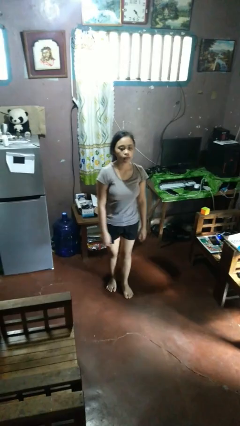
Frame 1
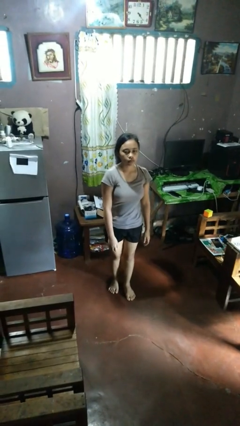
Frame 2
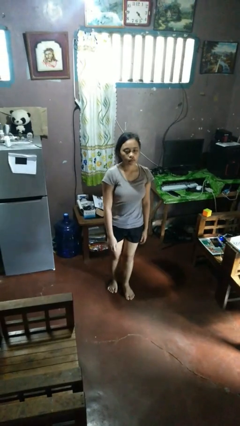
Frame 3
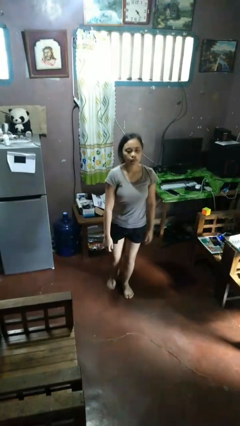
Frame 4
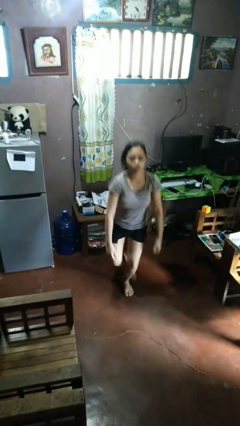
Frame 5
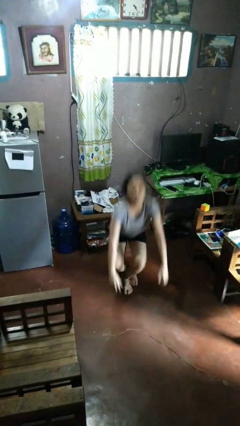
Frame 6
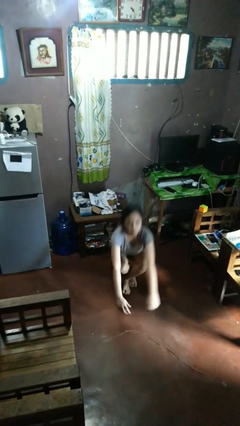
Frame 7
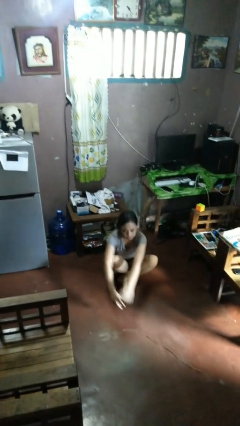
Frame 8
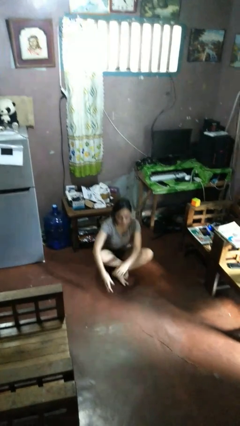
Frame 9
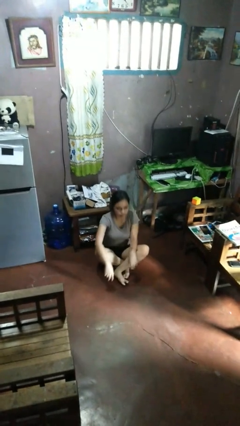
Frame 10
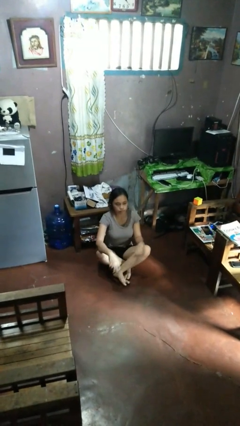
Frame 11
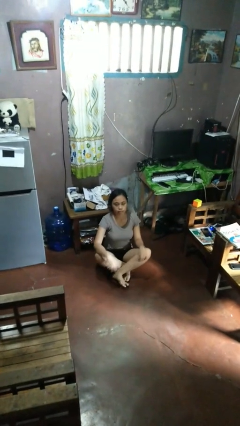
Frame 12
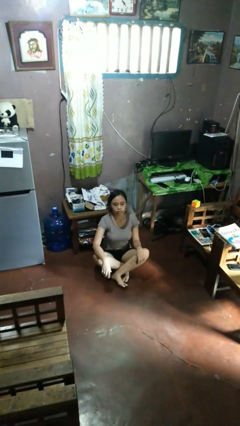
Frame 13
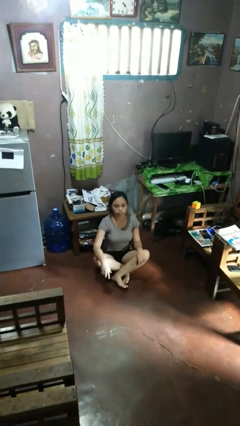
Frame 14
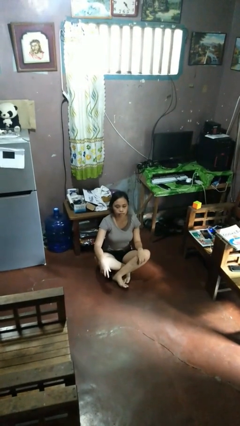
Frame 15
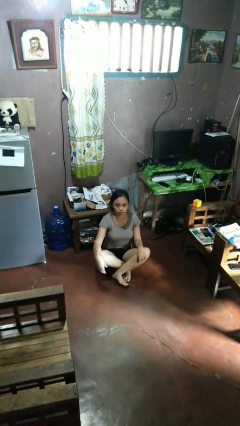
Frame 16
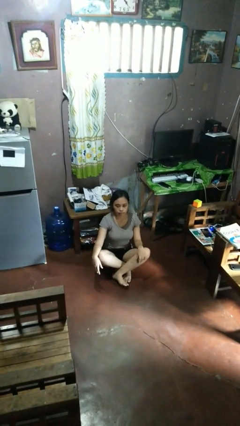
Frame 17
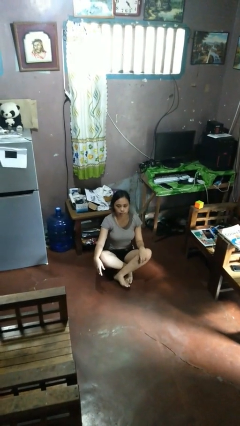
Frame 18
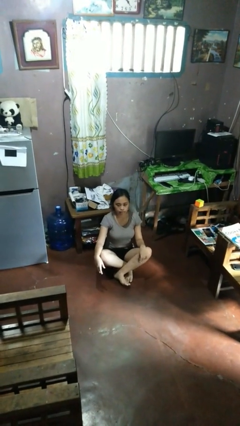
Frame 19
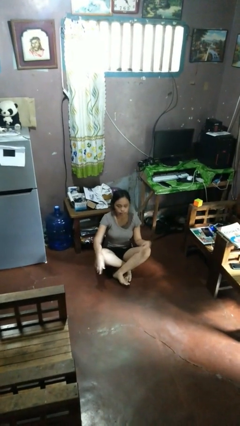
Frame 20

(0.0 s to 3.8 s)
person sits crisscross

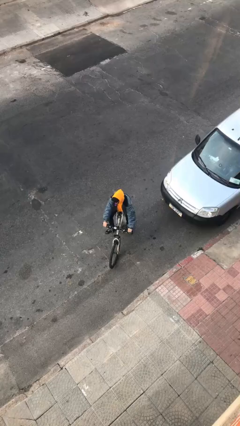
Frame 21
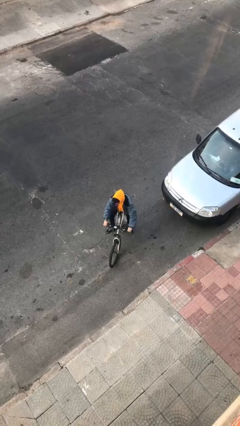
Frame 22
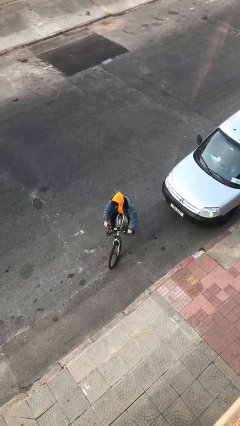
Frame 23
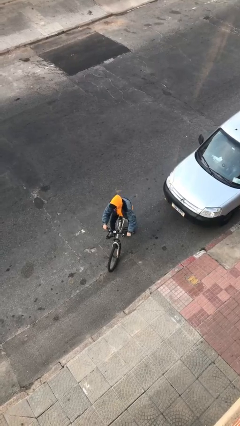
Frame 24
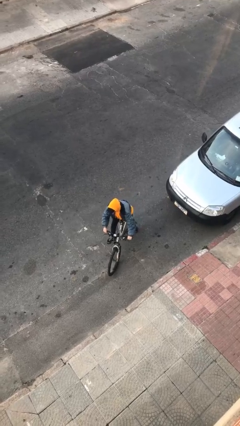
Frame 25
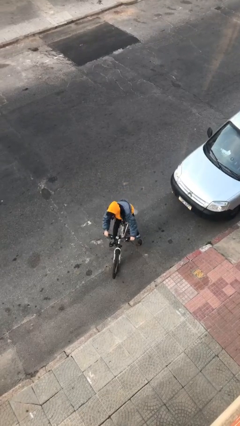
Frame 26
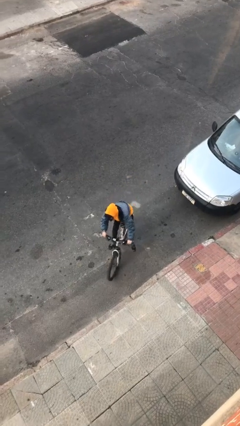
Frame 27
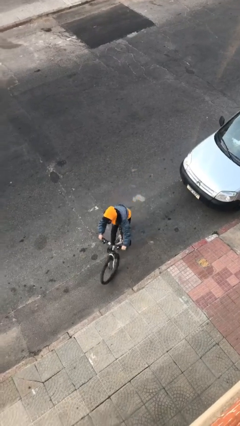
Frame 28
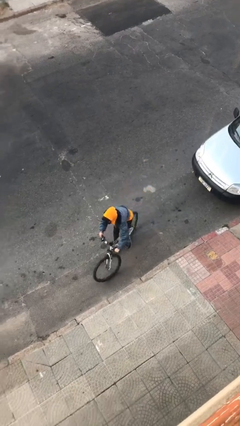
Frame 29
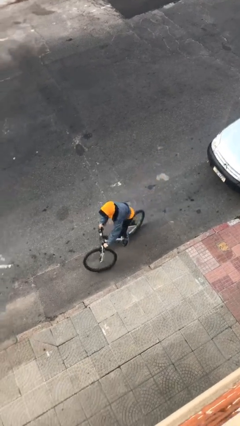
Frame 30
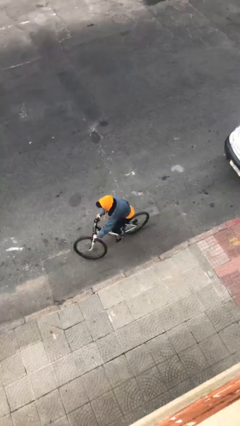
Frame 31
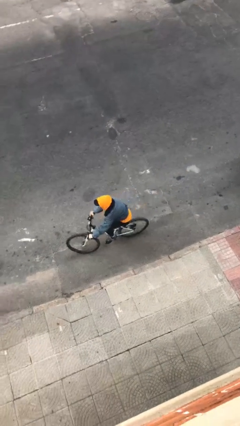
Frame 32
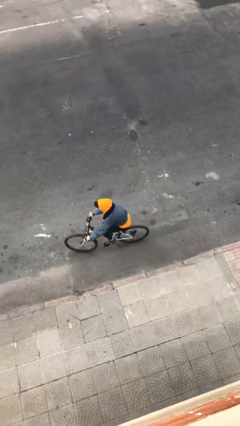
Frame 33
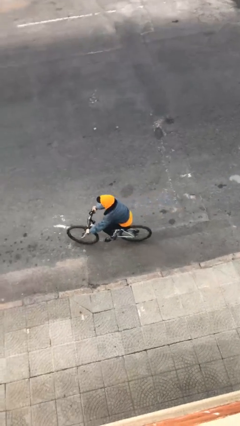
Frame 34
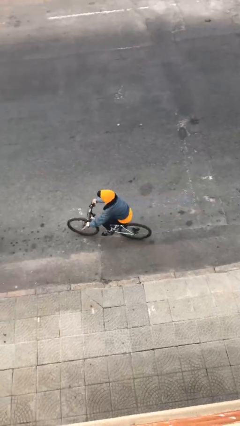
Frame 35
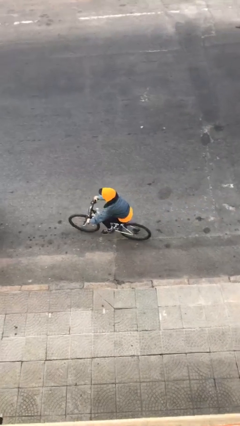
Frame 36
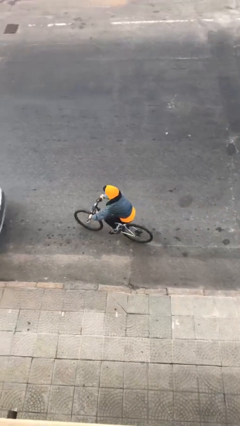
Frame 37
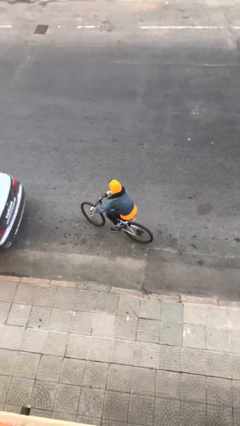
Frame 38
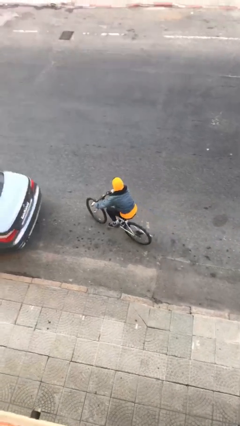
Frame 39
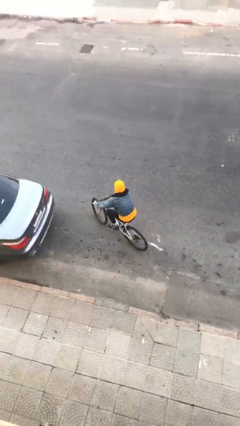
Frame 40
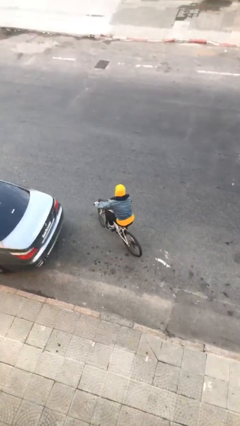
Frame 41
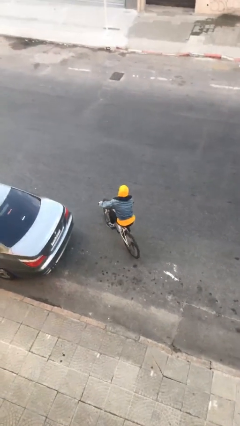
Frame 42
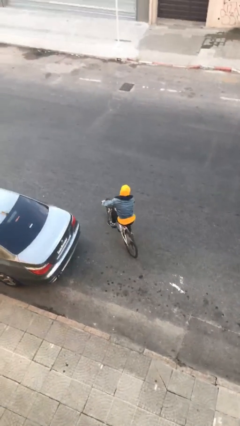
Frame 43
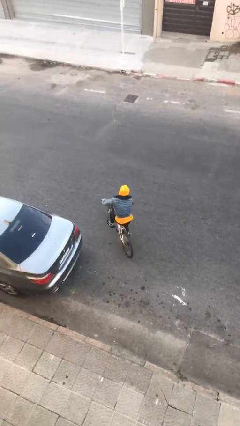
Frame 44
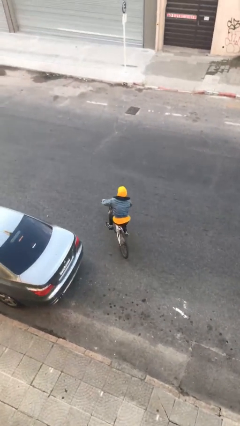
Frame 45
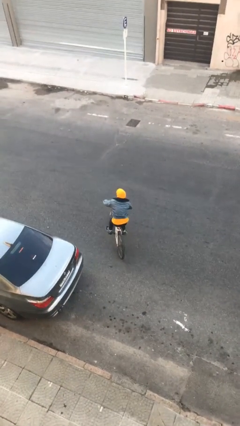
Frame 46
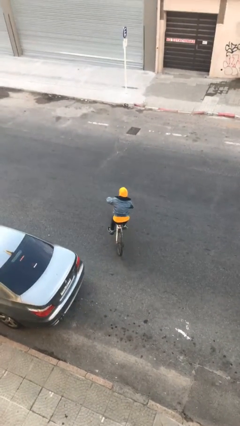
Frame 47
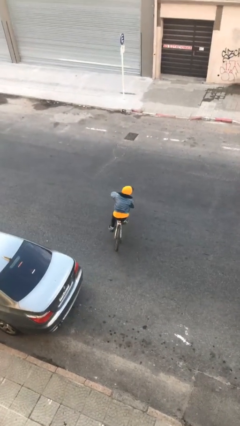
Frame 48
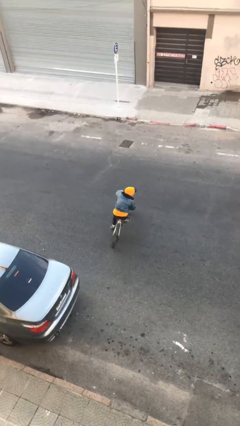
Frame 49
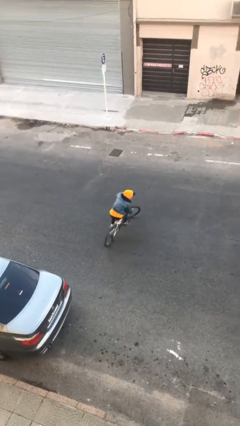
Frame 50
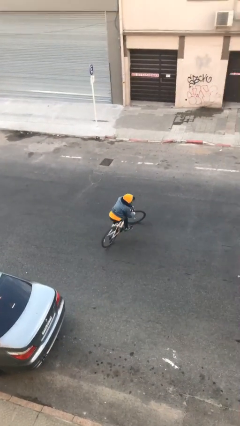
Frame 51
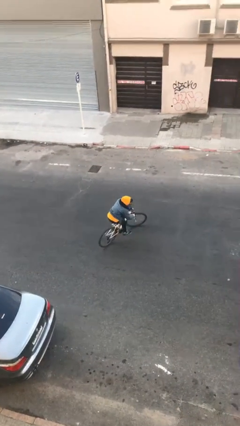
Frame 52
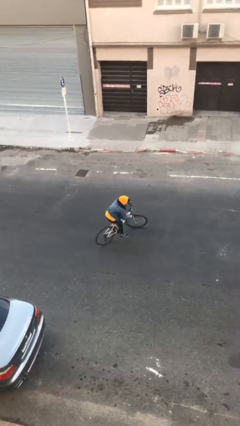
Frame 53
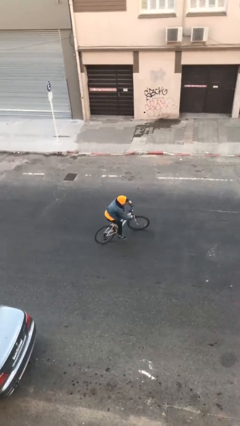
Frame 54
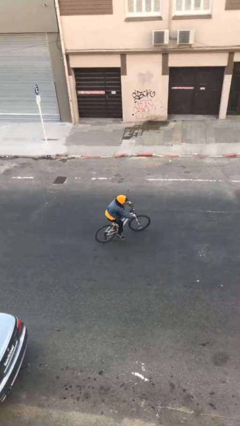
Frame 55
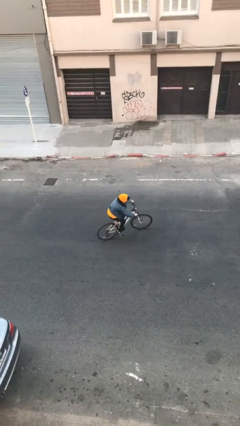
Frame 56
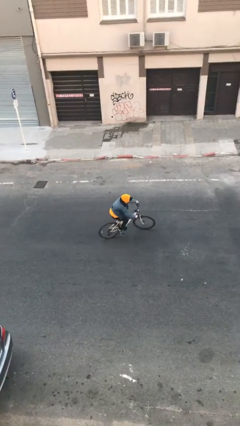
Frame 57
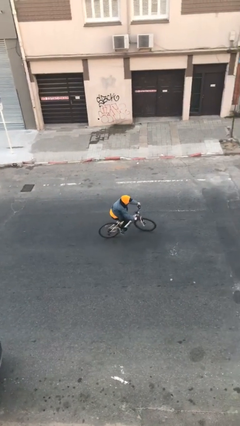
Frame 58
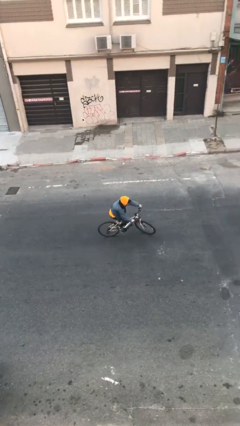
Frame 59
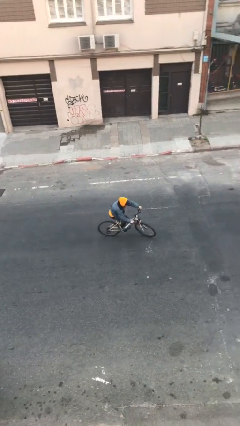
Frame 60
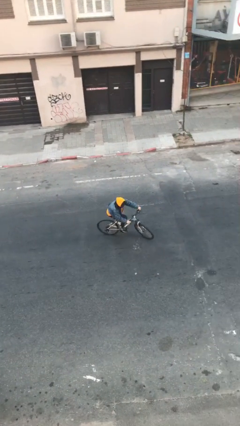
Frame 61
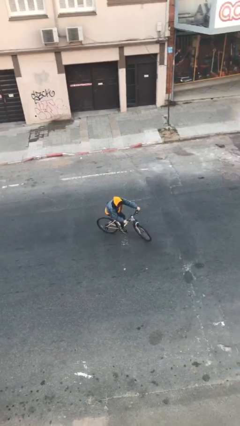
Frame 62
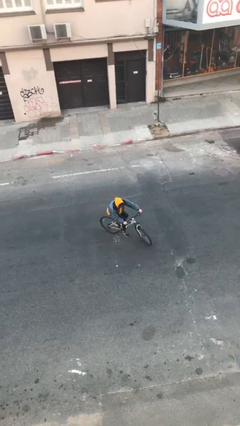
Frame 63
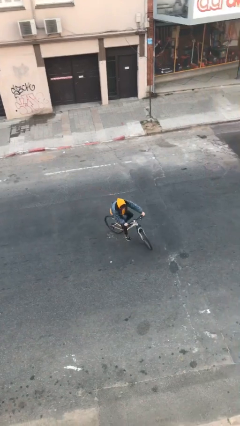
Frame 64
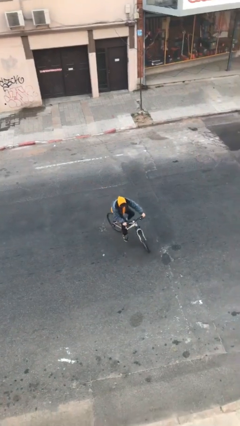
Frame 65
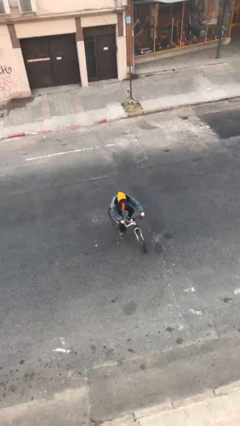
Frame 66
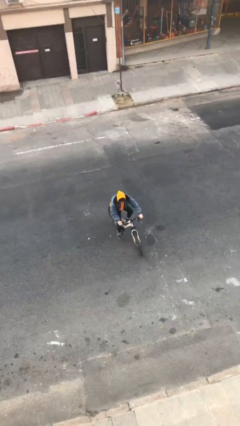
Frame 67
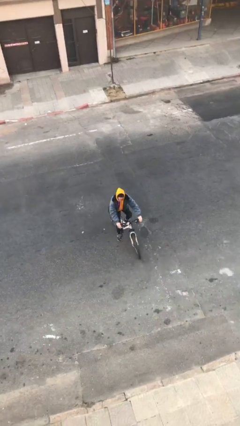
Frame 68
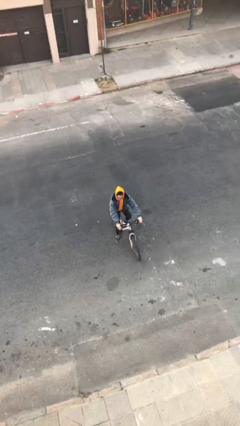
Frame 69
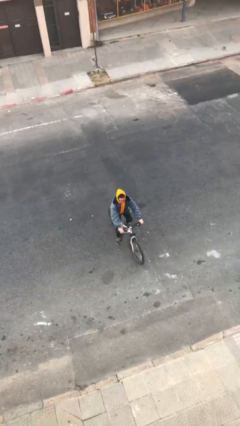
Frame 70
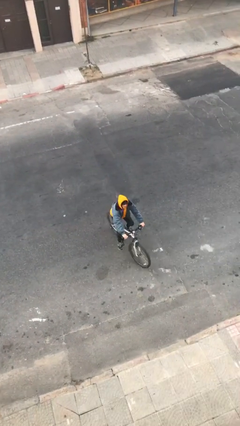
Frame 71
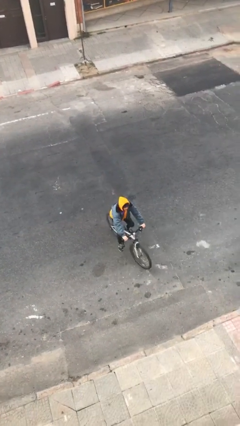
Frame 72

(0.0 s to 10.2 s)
person rides bicycle

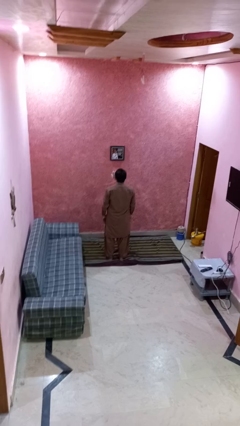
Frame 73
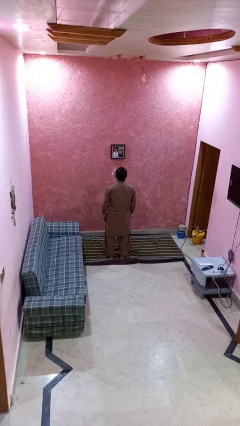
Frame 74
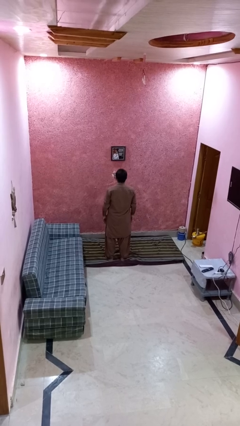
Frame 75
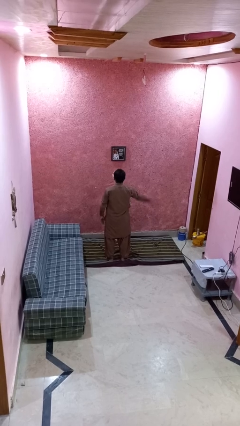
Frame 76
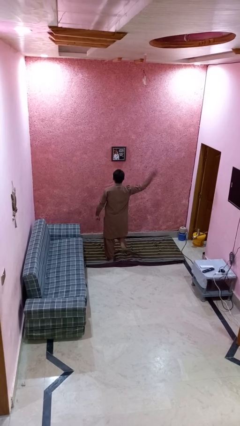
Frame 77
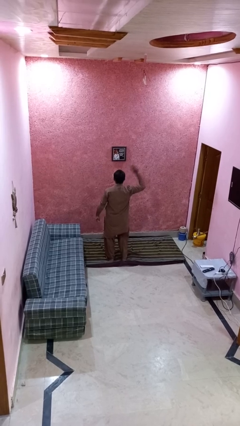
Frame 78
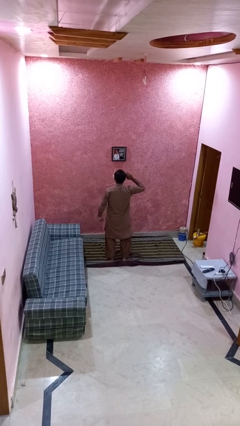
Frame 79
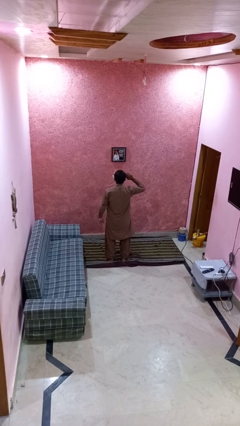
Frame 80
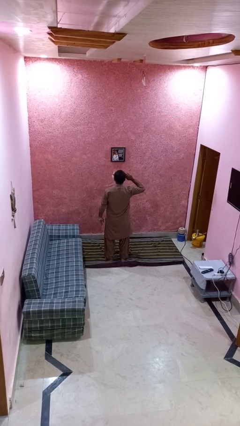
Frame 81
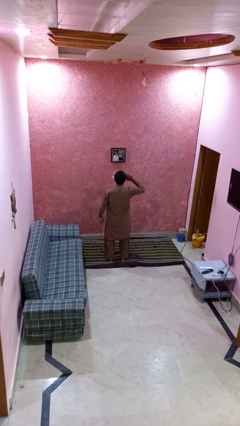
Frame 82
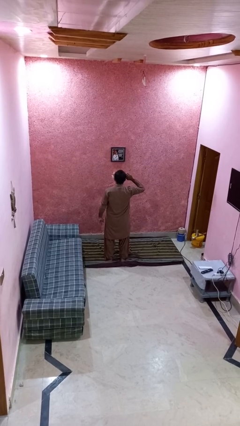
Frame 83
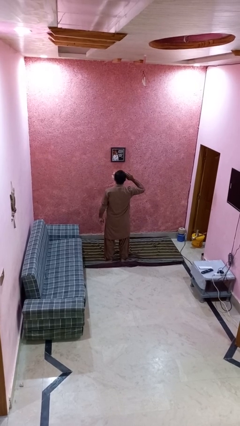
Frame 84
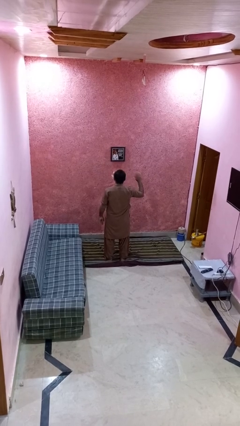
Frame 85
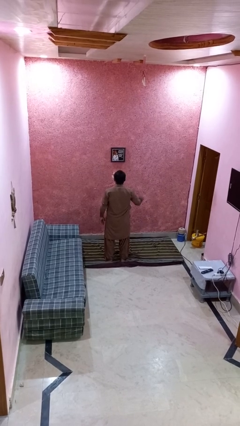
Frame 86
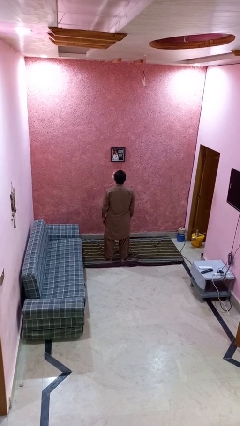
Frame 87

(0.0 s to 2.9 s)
person salutes

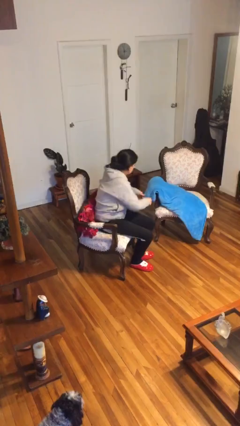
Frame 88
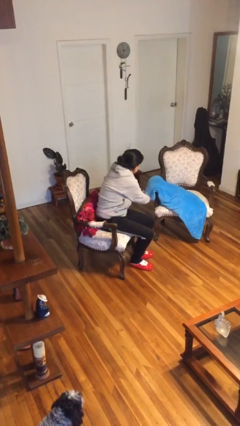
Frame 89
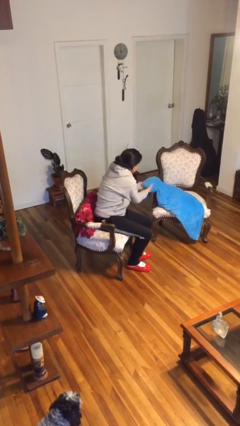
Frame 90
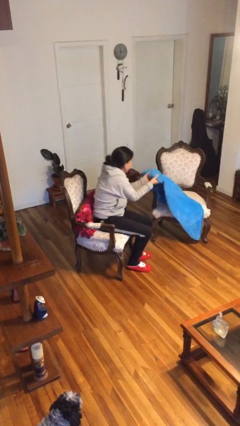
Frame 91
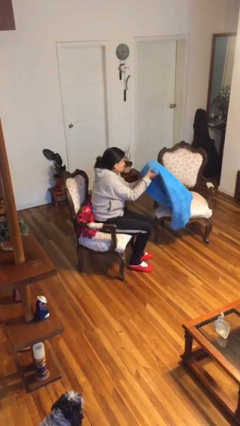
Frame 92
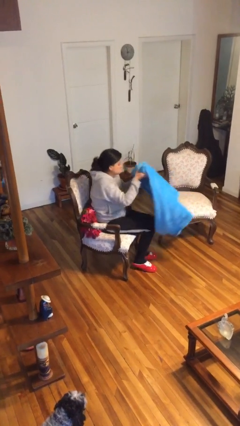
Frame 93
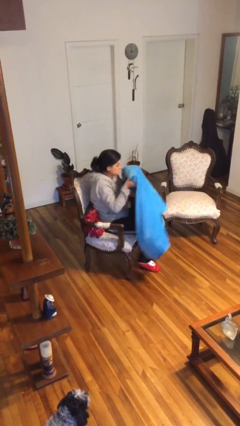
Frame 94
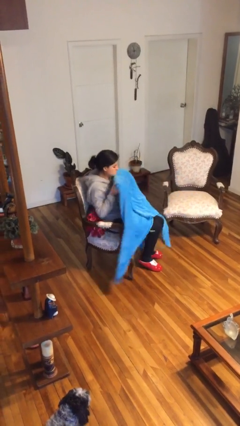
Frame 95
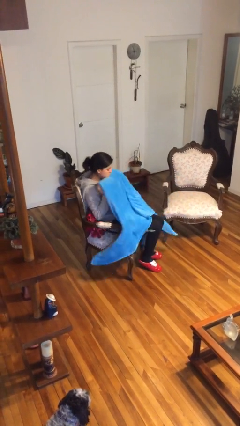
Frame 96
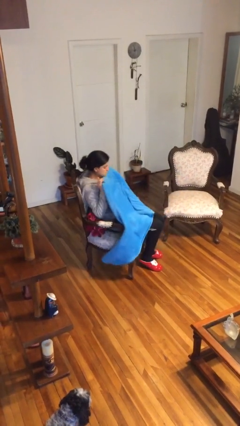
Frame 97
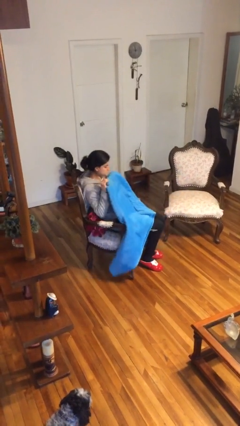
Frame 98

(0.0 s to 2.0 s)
person covers with blanket
